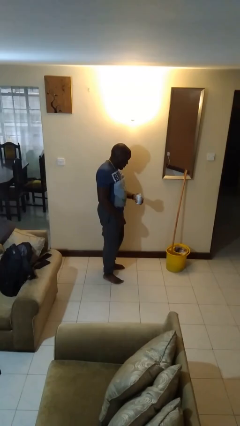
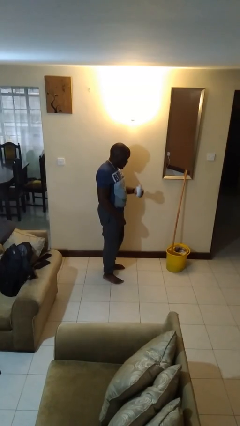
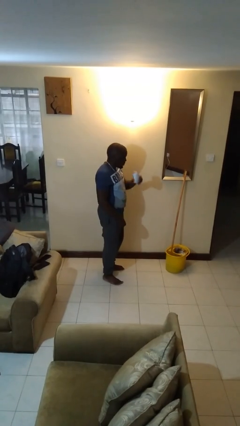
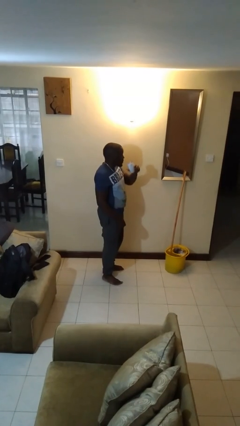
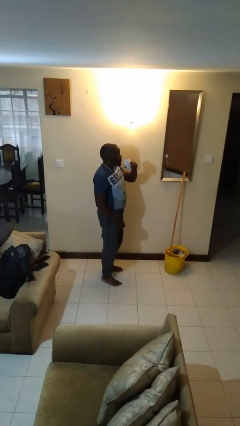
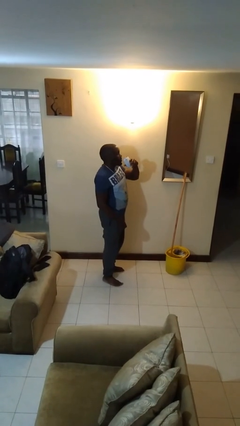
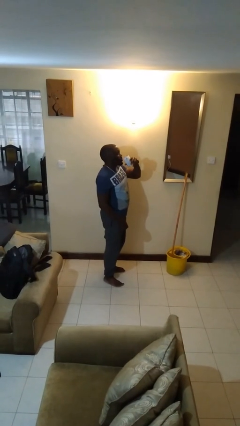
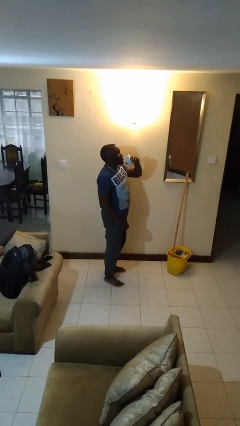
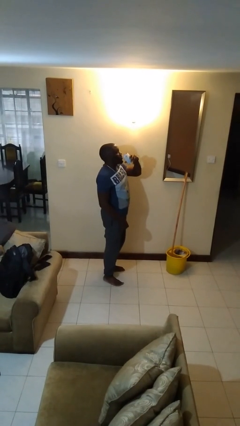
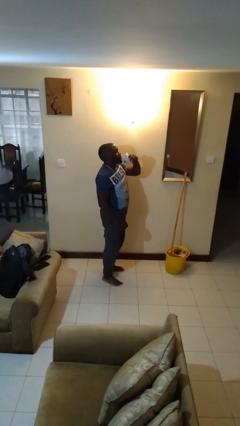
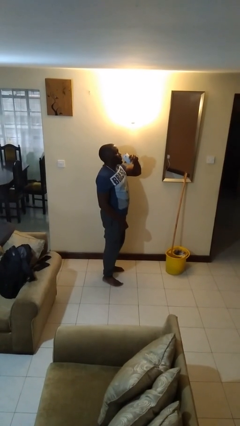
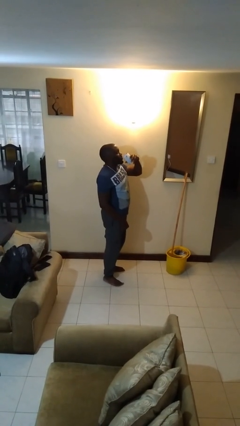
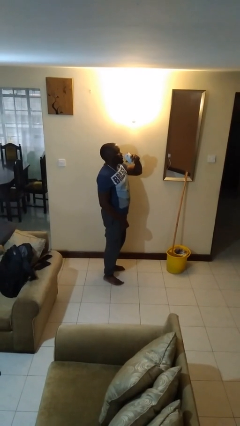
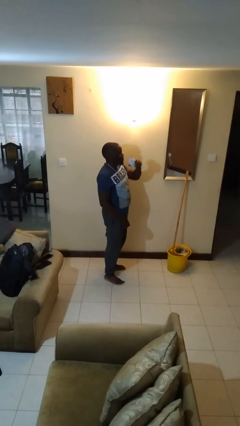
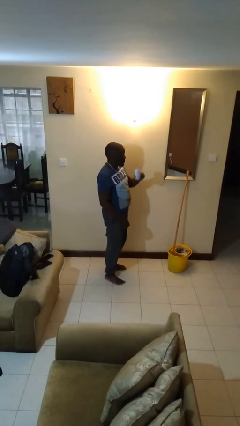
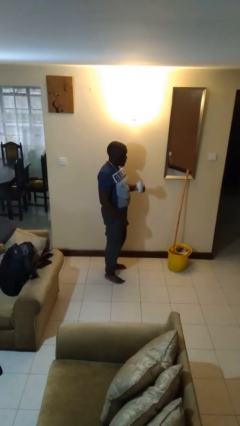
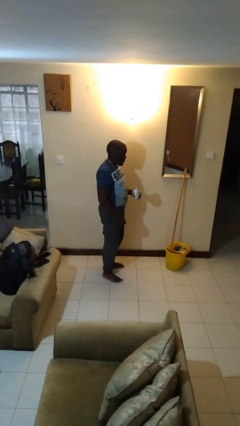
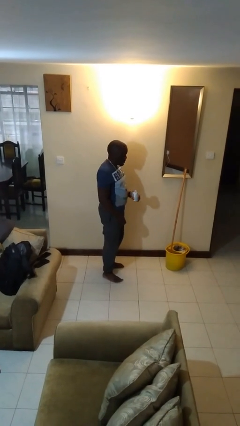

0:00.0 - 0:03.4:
person drinks from beverage can

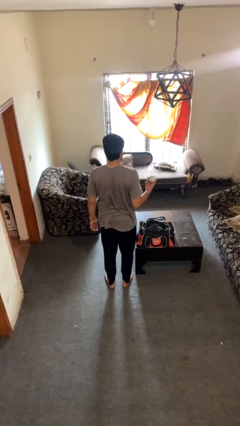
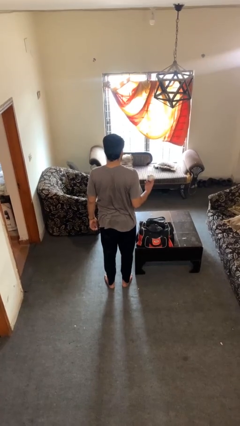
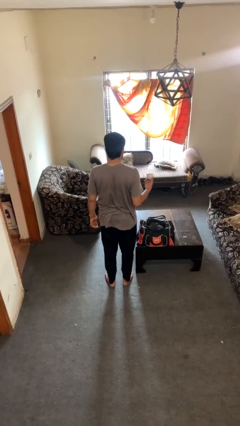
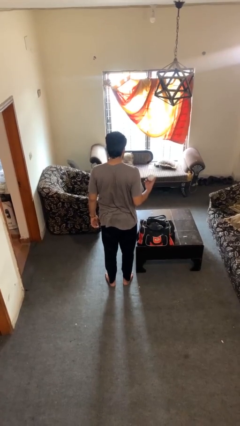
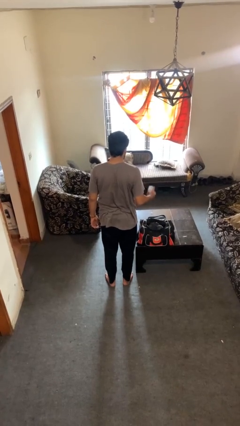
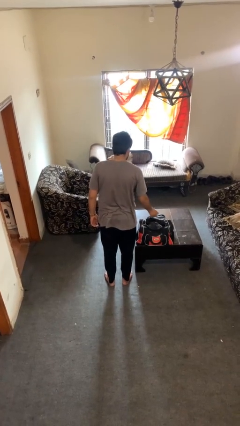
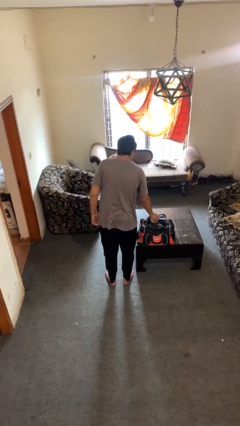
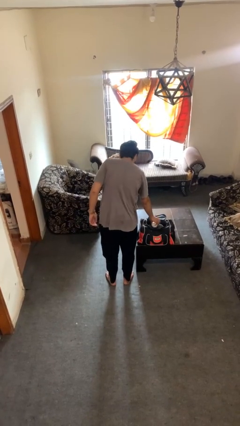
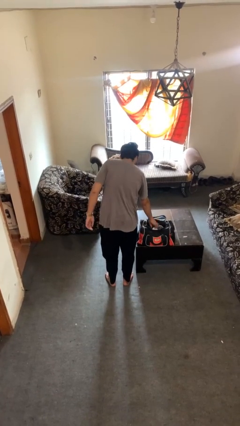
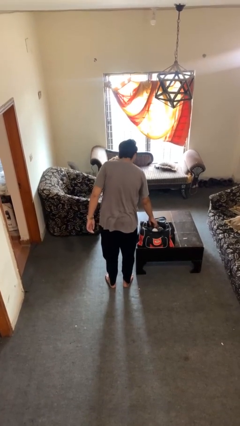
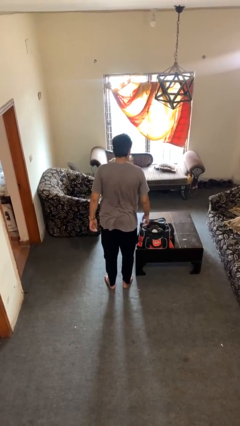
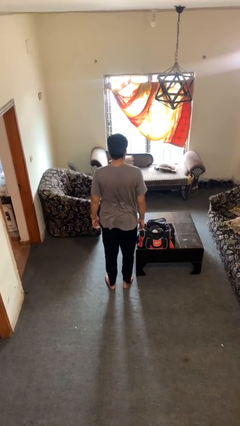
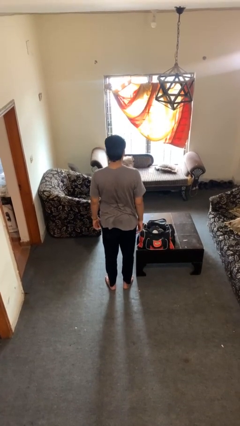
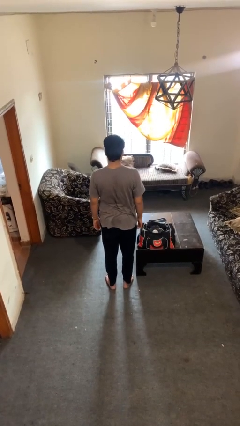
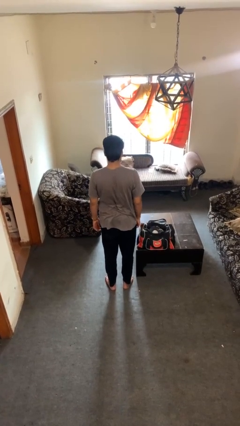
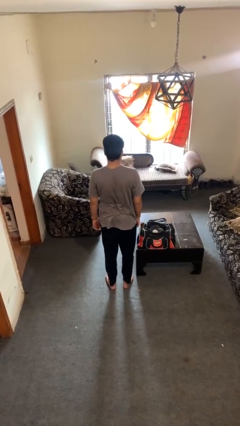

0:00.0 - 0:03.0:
person puts object into bag

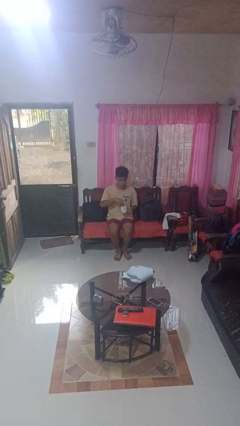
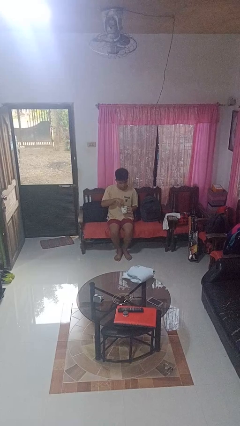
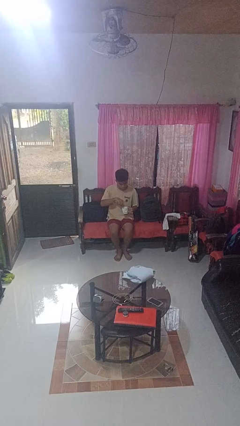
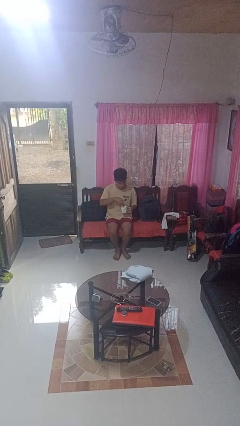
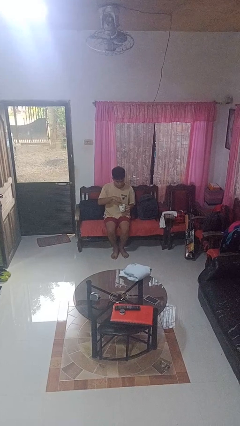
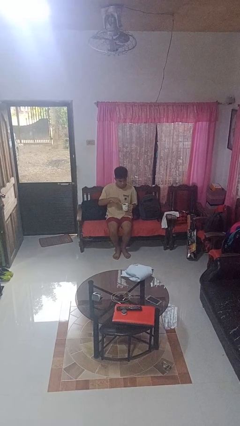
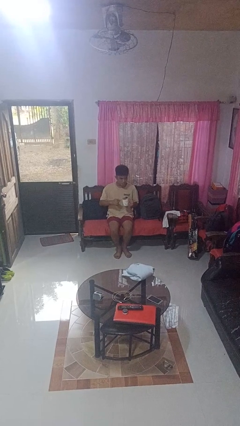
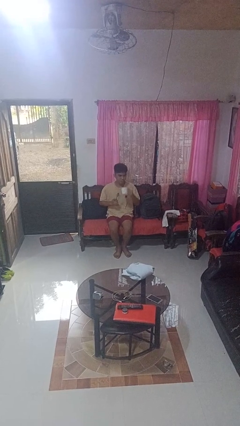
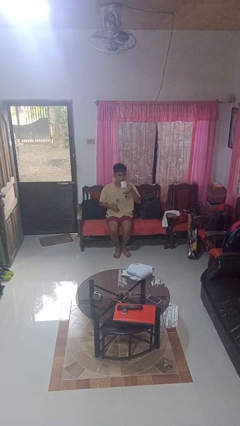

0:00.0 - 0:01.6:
person stirs mug

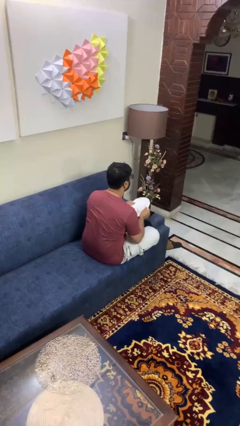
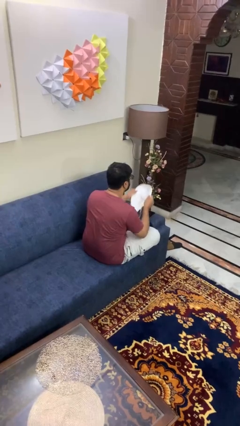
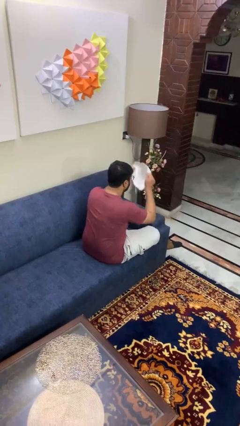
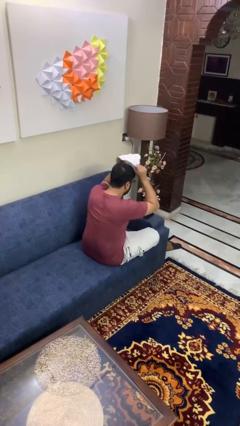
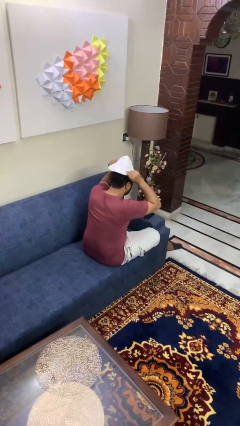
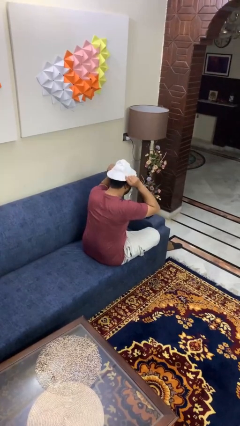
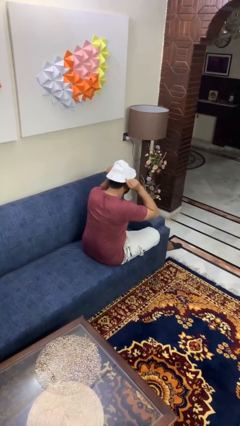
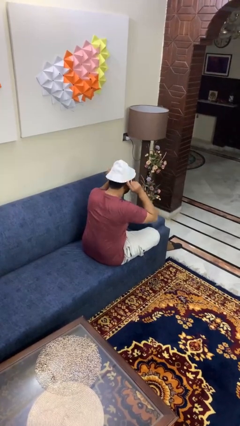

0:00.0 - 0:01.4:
person puts on hat

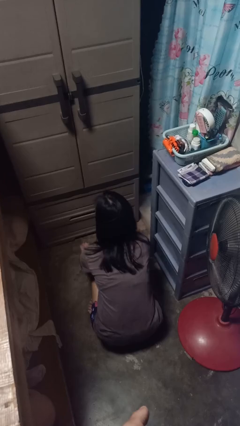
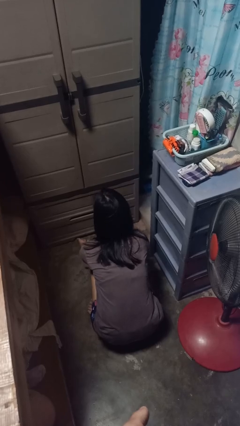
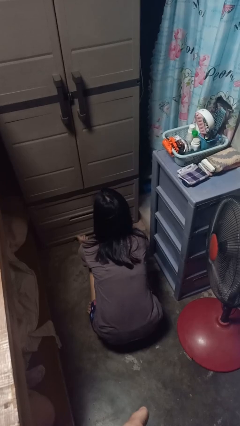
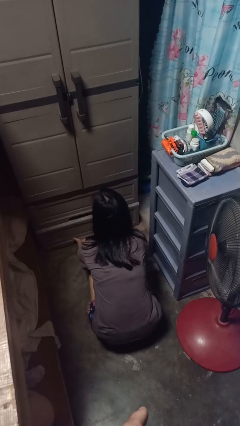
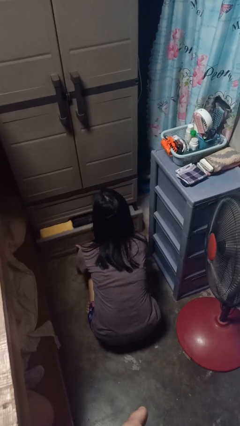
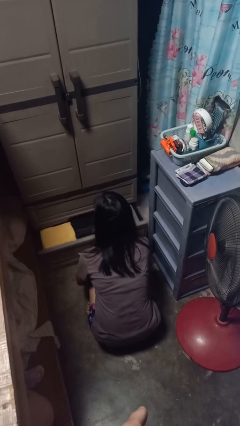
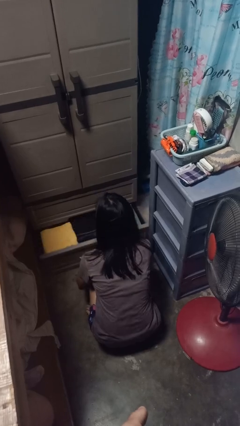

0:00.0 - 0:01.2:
person opens dresser drawer

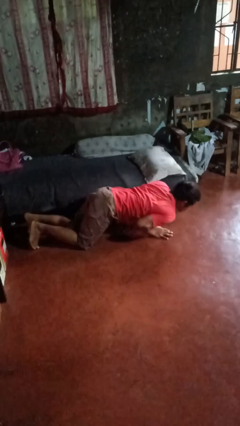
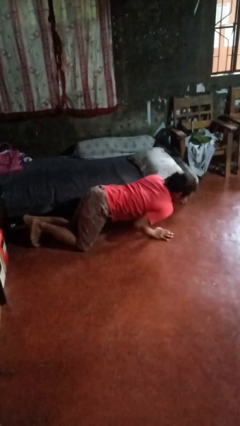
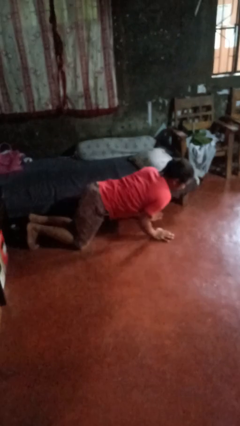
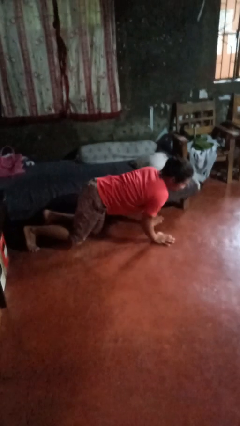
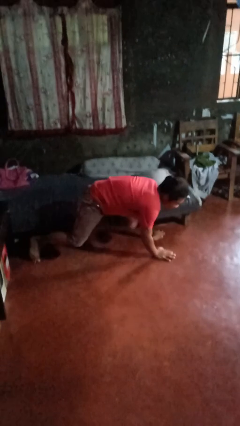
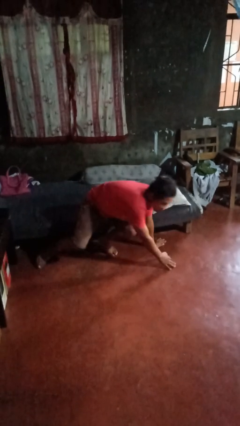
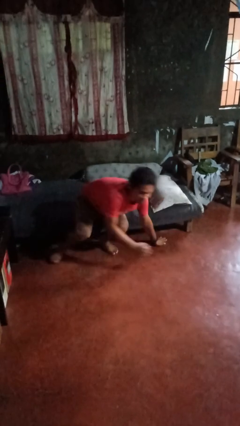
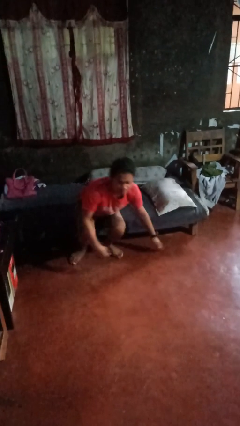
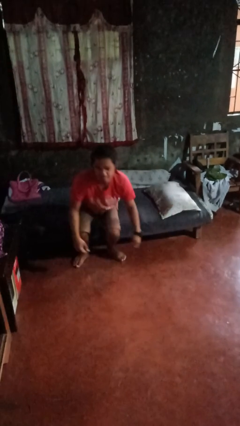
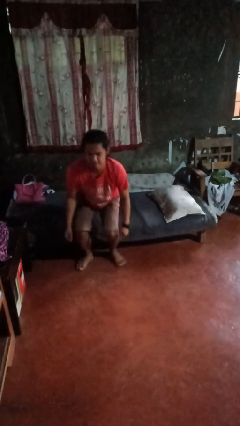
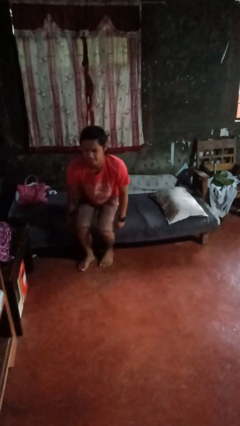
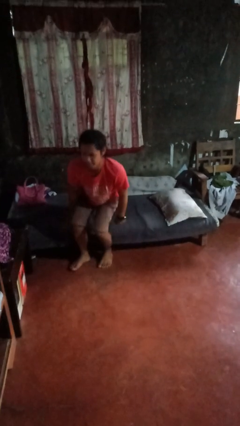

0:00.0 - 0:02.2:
person falls from bed

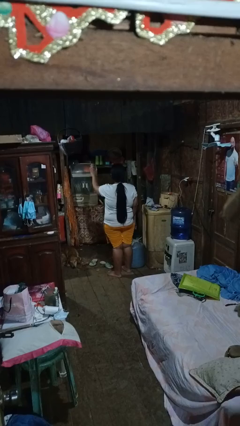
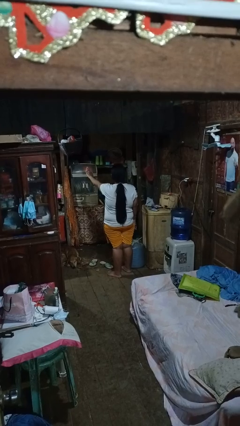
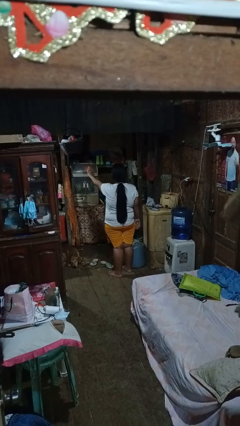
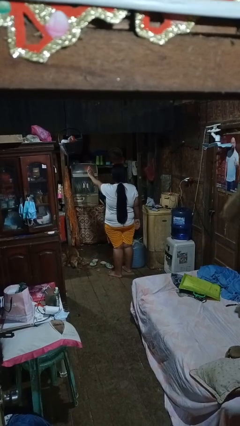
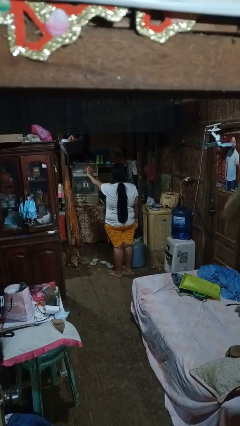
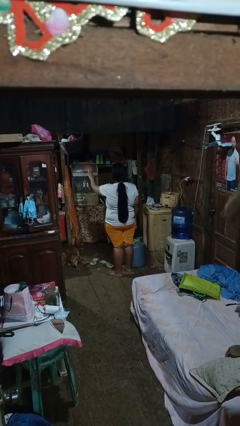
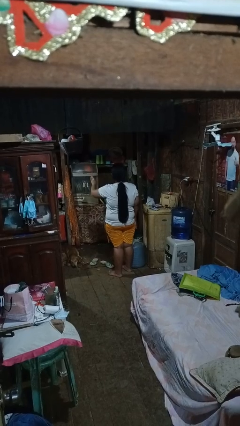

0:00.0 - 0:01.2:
person gestures stop

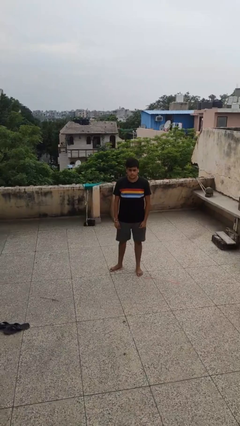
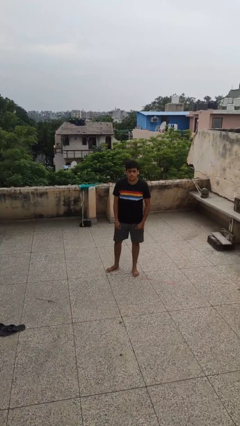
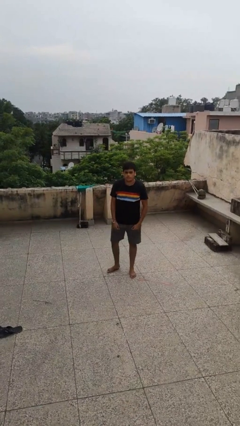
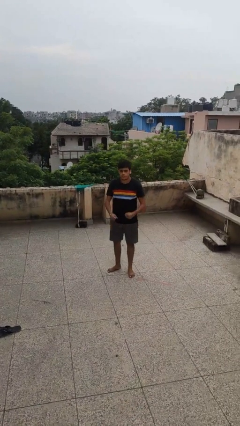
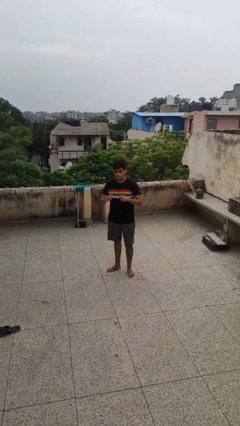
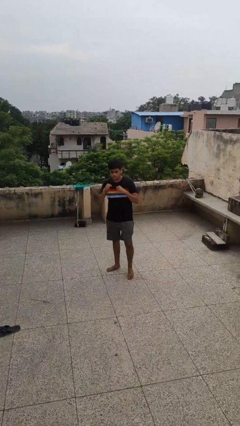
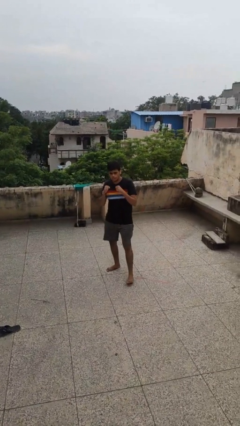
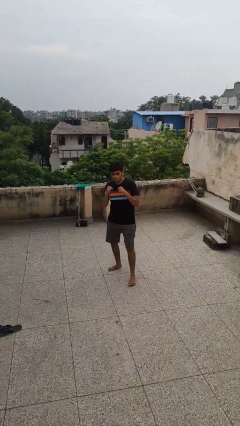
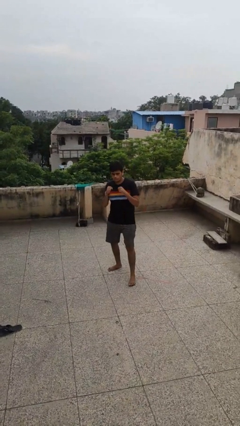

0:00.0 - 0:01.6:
person punches

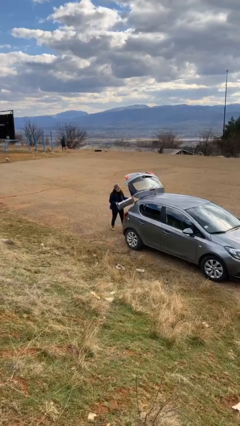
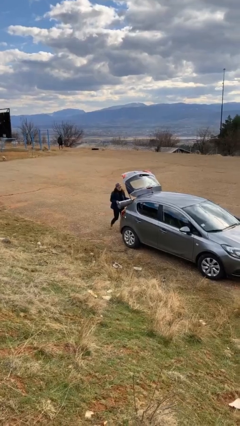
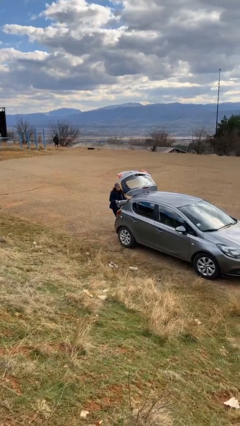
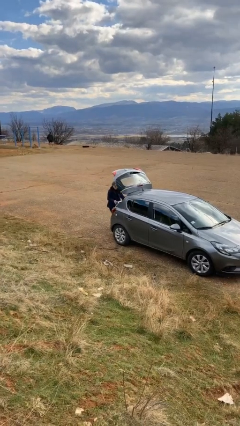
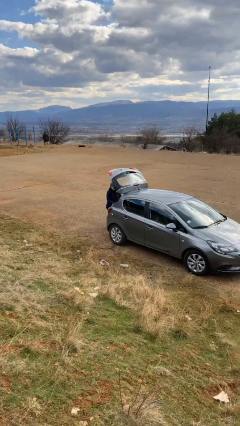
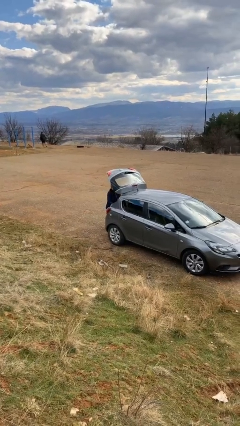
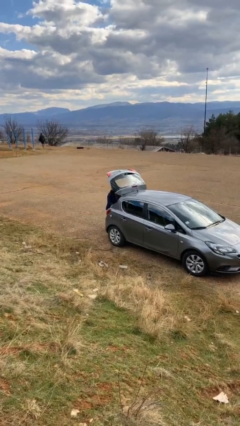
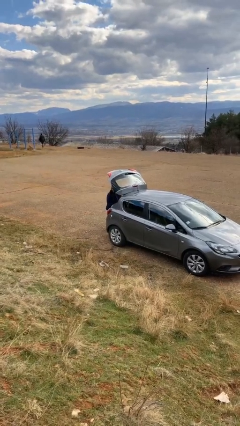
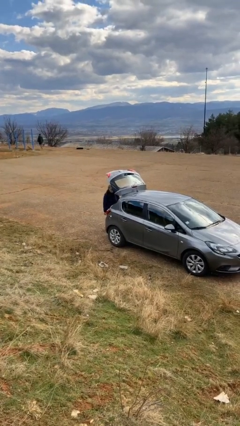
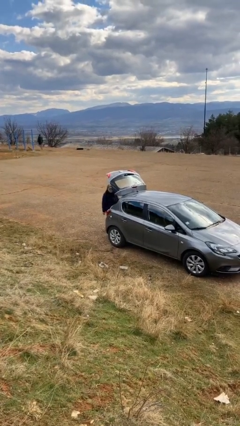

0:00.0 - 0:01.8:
person loads car
